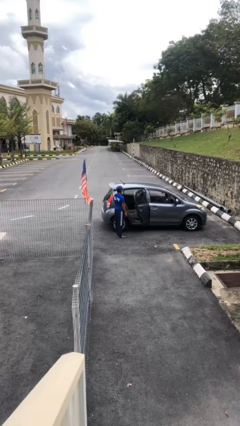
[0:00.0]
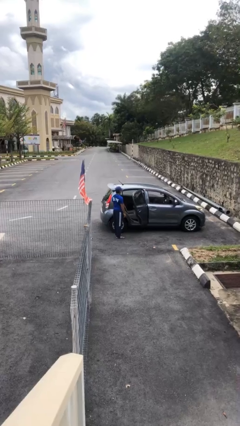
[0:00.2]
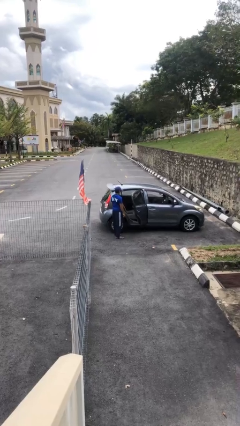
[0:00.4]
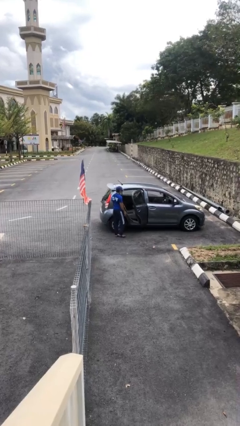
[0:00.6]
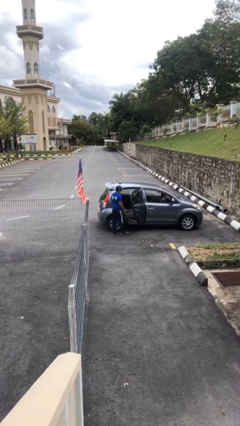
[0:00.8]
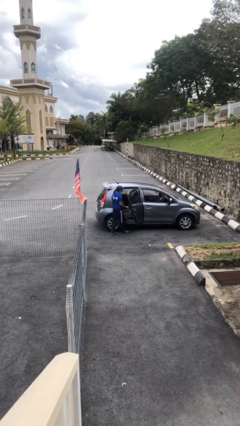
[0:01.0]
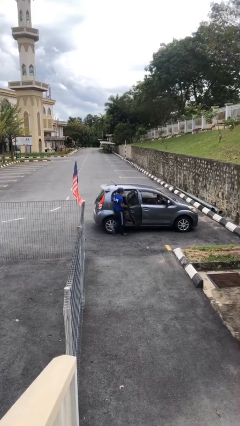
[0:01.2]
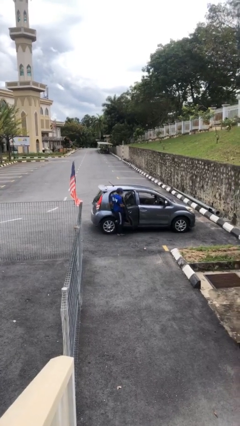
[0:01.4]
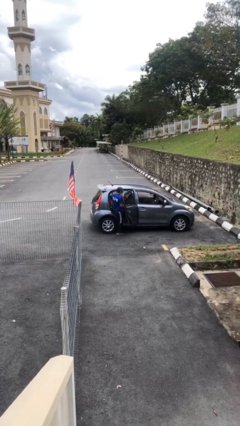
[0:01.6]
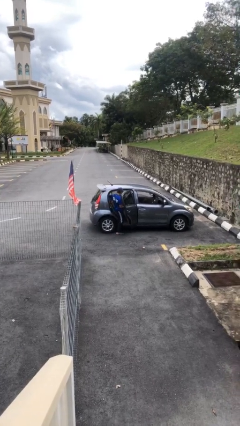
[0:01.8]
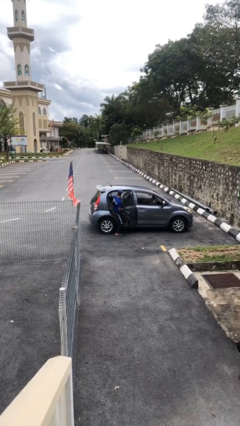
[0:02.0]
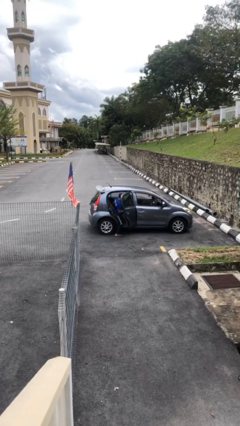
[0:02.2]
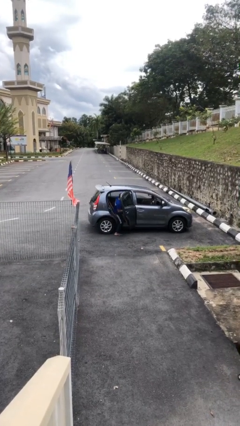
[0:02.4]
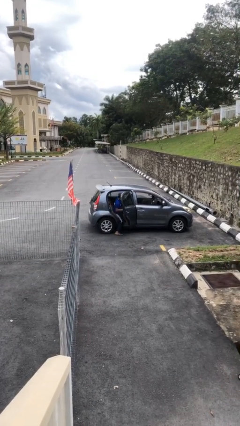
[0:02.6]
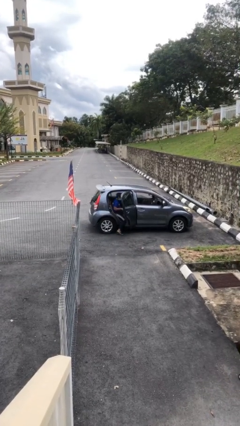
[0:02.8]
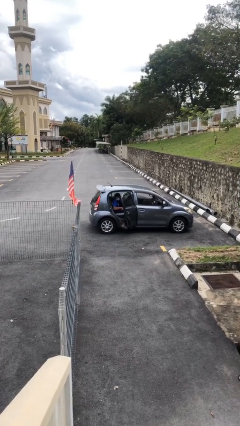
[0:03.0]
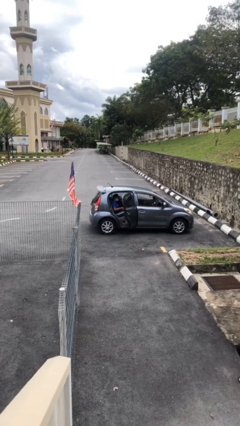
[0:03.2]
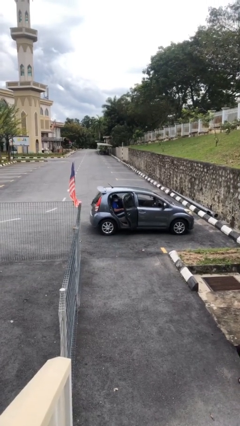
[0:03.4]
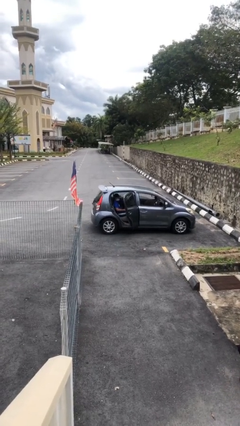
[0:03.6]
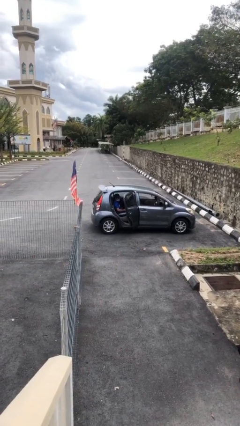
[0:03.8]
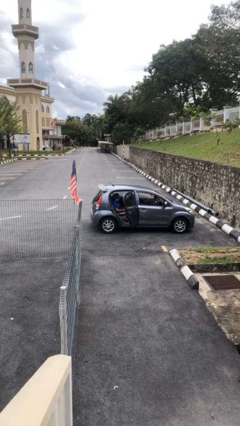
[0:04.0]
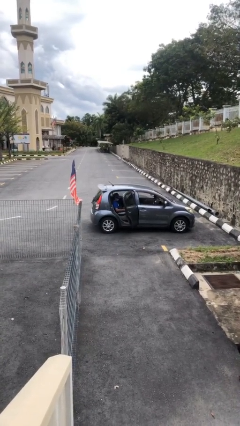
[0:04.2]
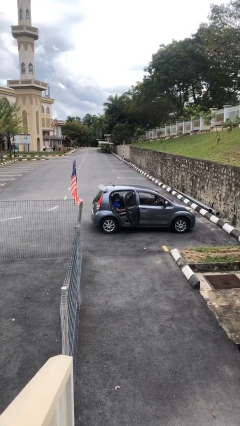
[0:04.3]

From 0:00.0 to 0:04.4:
person enters car

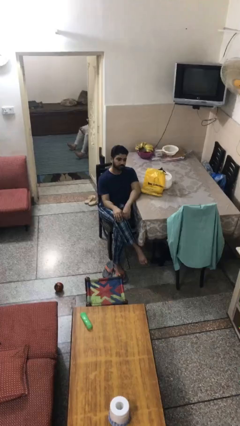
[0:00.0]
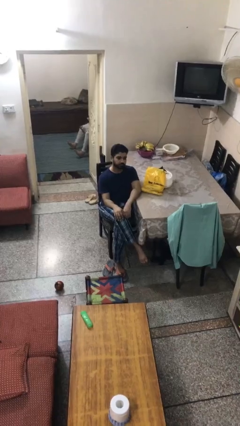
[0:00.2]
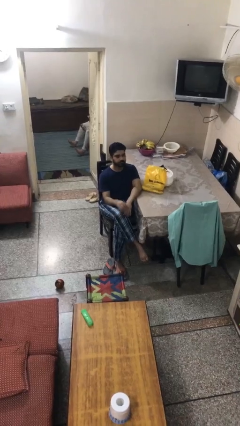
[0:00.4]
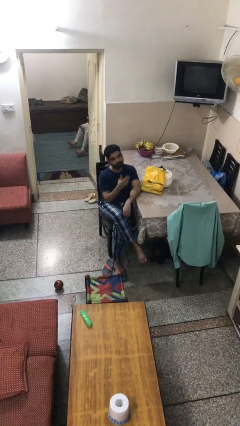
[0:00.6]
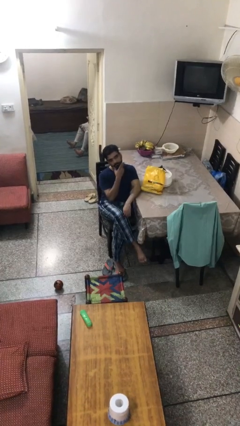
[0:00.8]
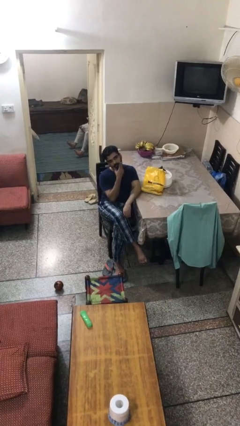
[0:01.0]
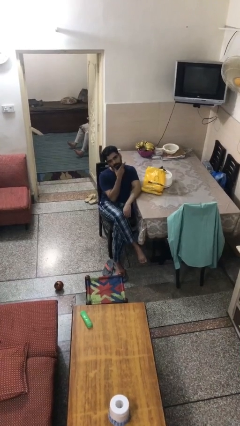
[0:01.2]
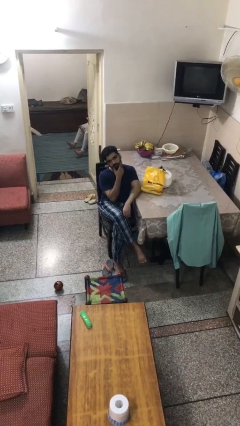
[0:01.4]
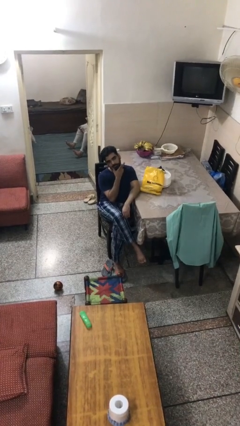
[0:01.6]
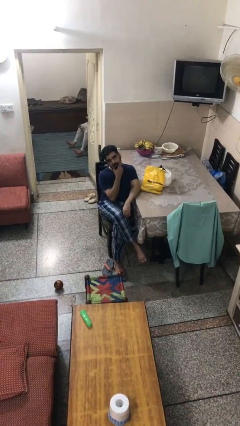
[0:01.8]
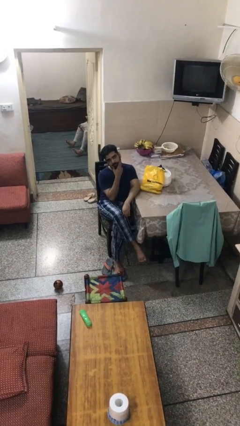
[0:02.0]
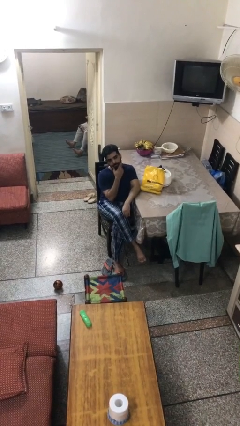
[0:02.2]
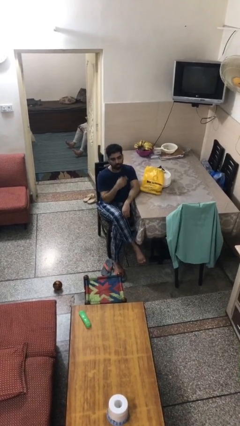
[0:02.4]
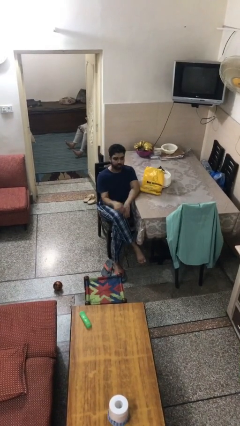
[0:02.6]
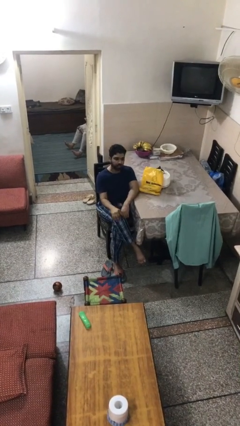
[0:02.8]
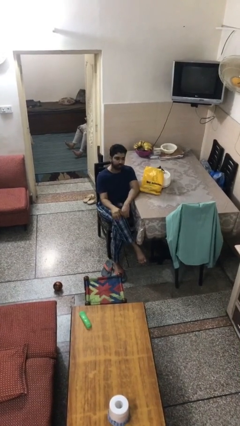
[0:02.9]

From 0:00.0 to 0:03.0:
person strokes chin

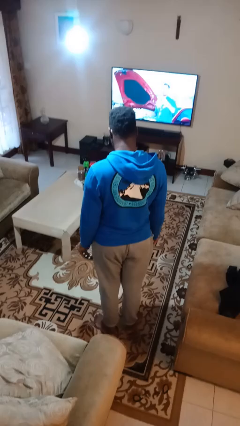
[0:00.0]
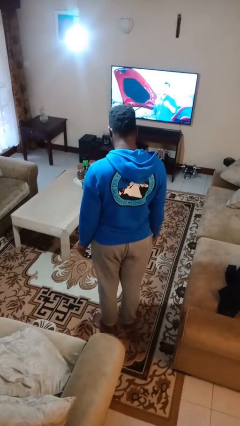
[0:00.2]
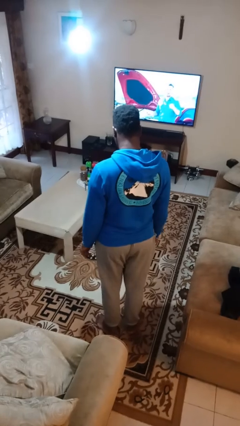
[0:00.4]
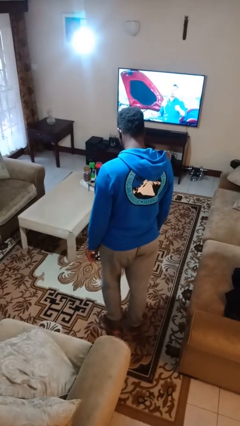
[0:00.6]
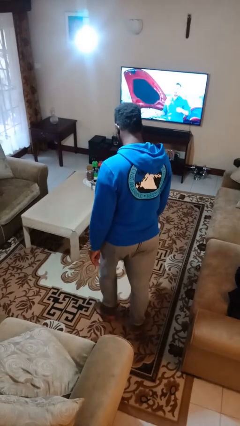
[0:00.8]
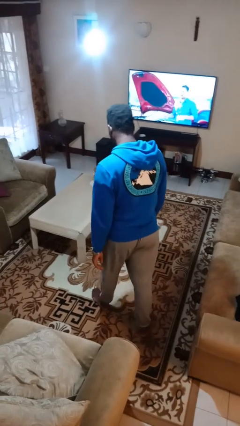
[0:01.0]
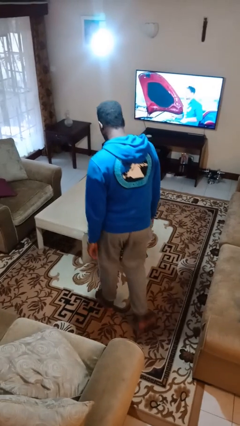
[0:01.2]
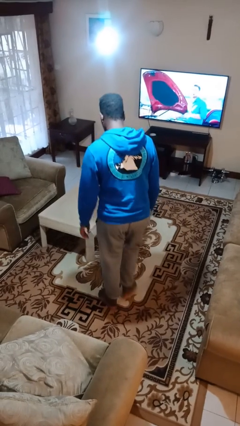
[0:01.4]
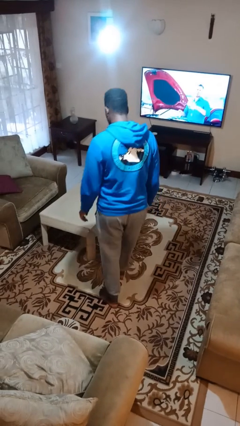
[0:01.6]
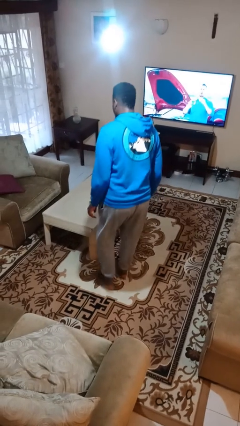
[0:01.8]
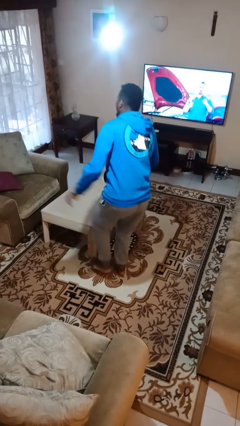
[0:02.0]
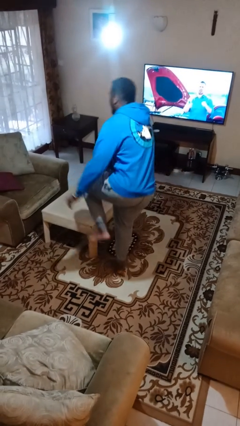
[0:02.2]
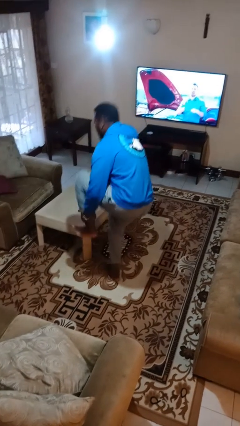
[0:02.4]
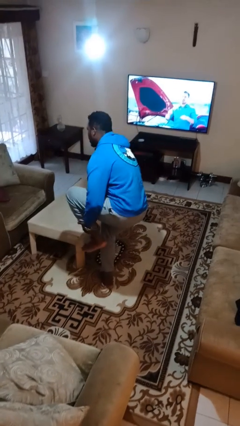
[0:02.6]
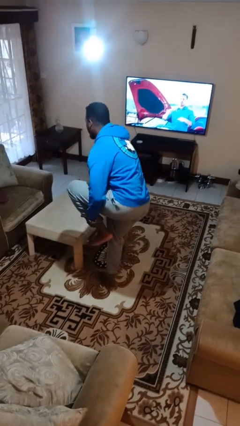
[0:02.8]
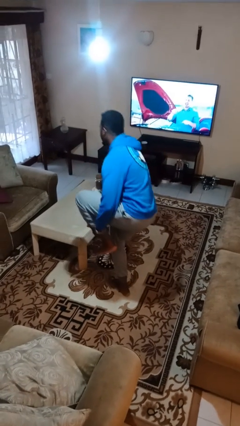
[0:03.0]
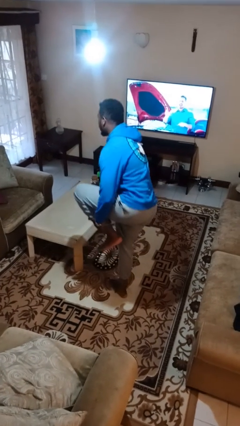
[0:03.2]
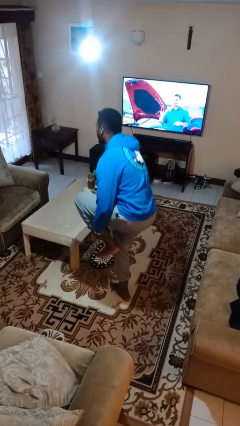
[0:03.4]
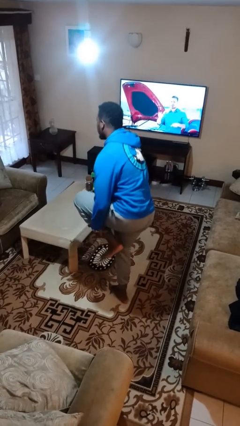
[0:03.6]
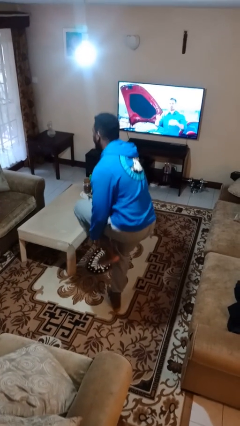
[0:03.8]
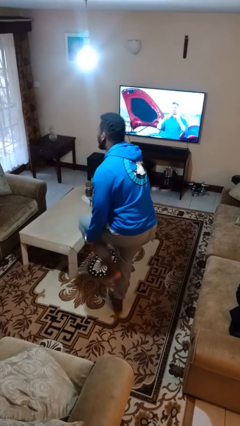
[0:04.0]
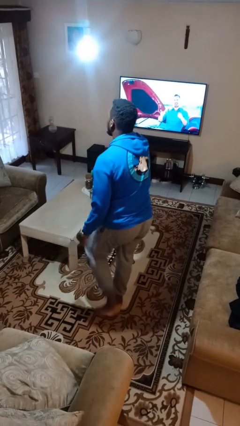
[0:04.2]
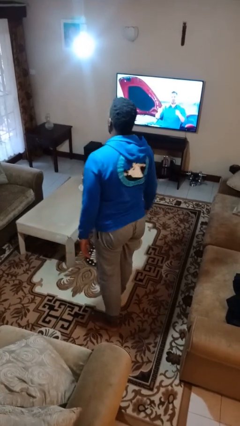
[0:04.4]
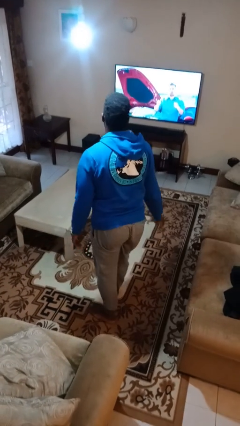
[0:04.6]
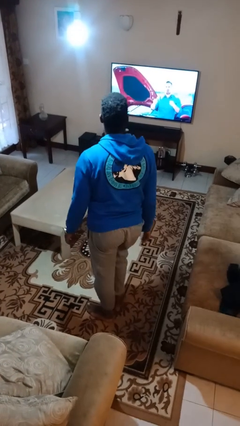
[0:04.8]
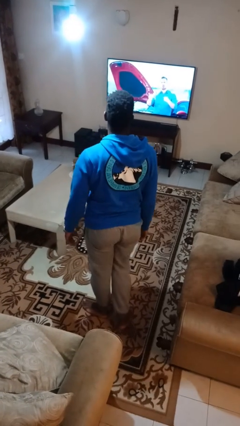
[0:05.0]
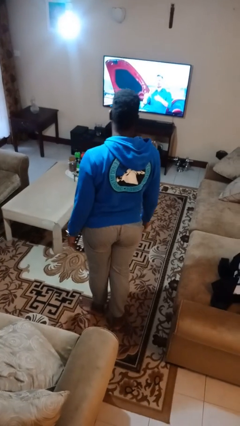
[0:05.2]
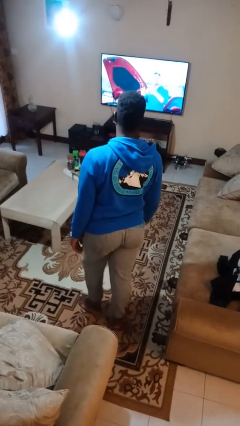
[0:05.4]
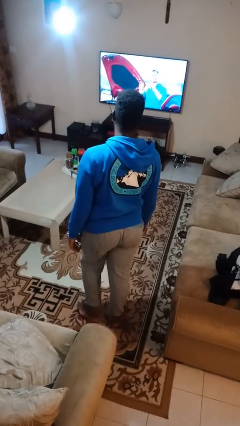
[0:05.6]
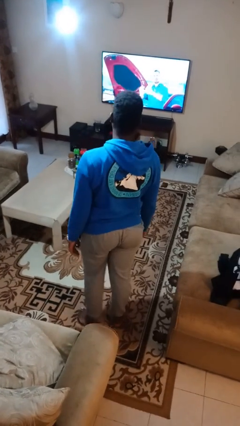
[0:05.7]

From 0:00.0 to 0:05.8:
person stubs toe

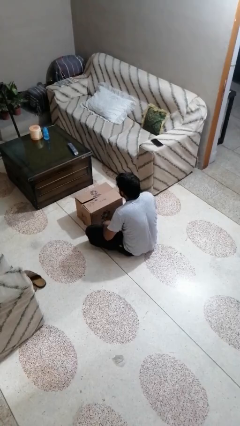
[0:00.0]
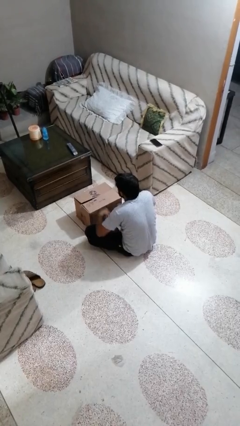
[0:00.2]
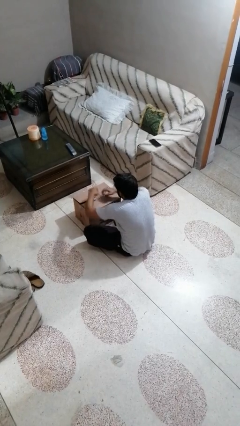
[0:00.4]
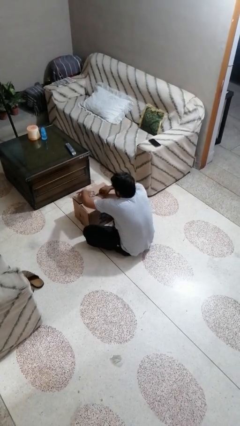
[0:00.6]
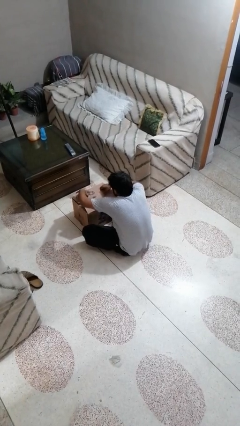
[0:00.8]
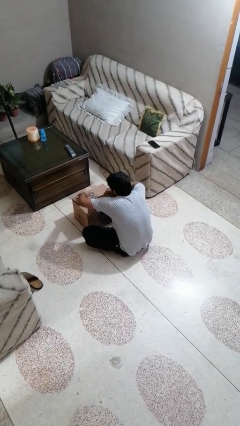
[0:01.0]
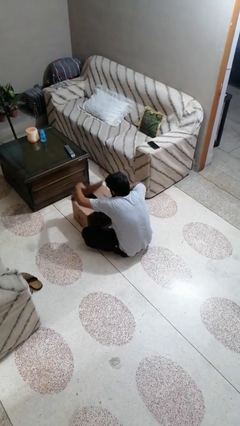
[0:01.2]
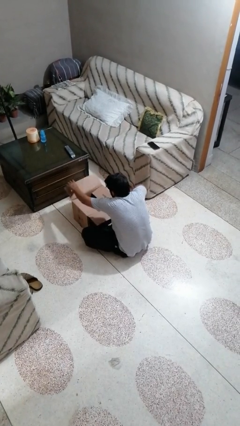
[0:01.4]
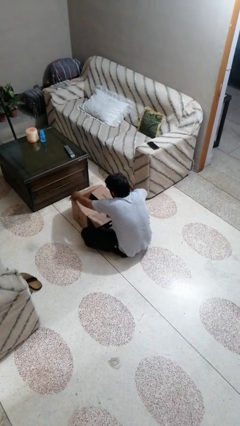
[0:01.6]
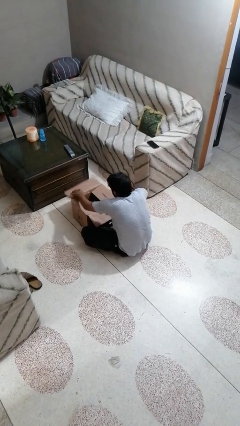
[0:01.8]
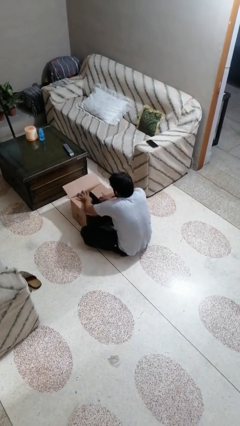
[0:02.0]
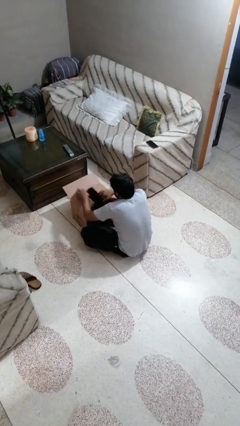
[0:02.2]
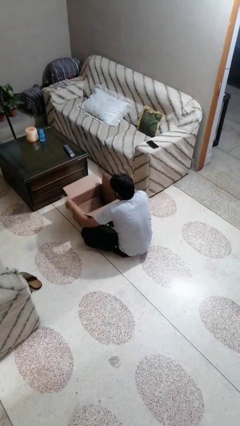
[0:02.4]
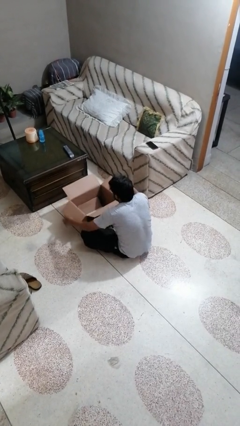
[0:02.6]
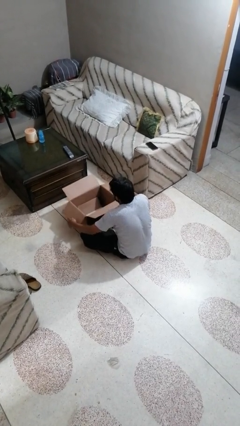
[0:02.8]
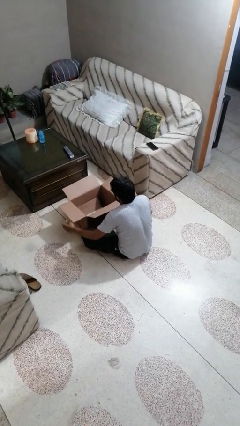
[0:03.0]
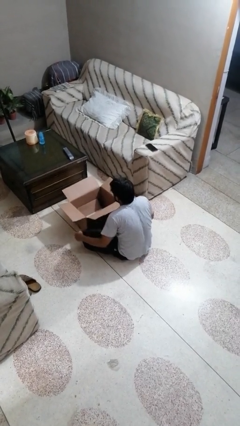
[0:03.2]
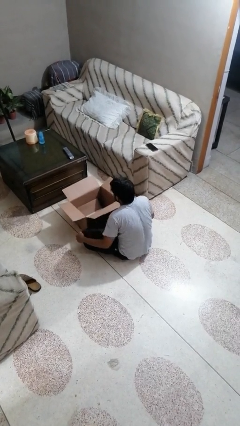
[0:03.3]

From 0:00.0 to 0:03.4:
person opens box

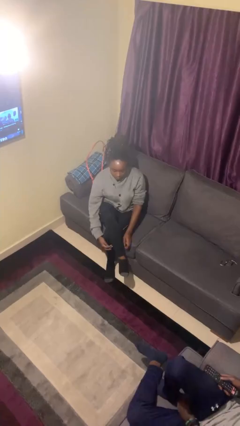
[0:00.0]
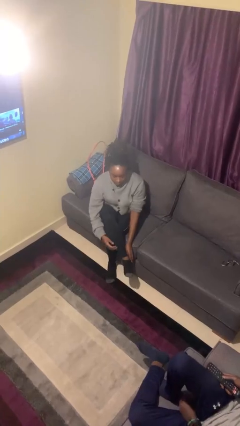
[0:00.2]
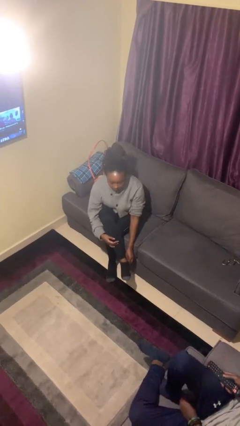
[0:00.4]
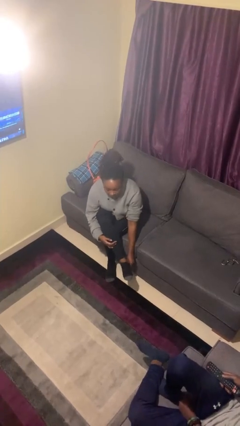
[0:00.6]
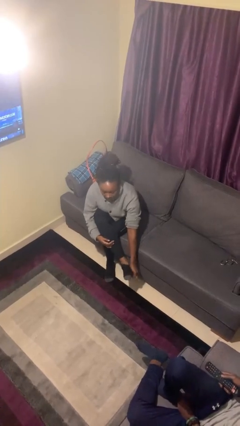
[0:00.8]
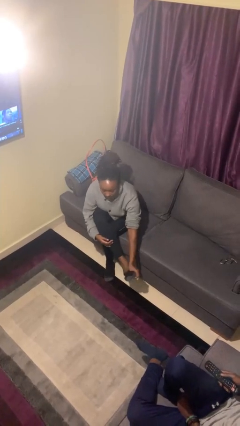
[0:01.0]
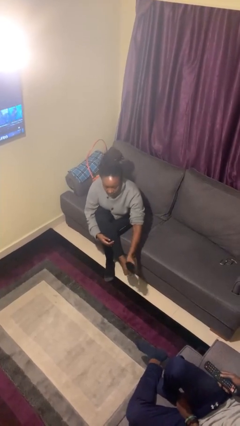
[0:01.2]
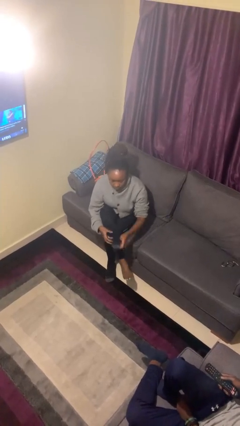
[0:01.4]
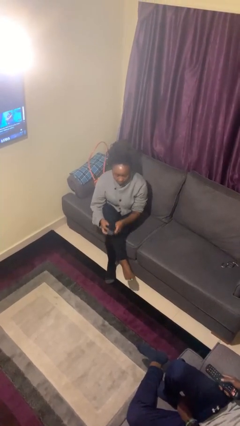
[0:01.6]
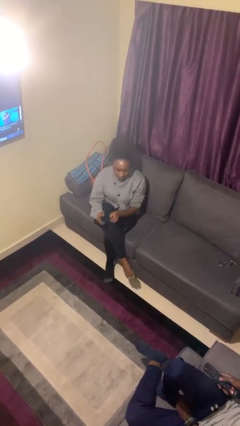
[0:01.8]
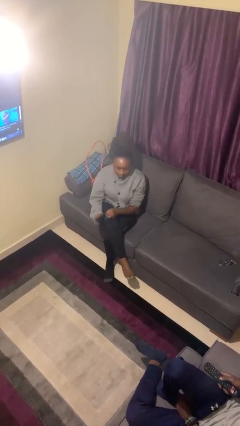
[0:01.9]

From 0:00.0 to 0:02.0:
person takes off socks
